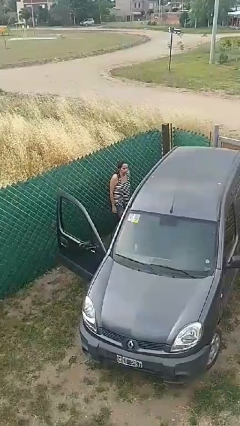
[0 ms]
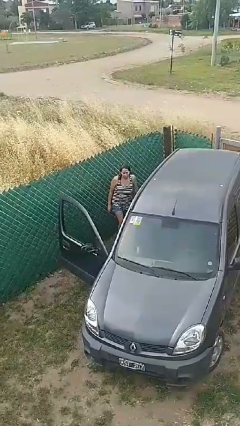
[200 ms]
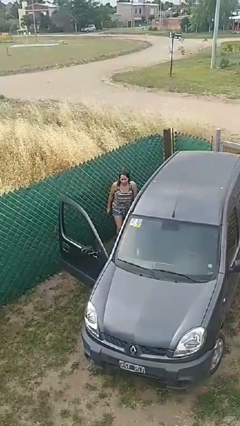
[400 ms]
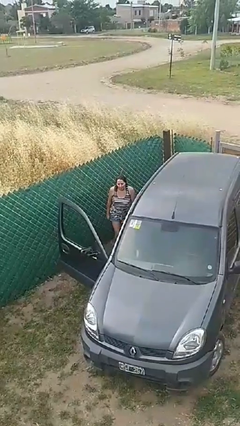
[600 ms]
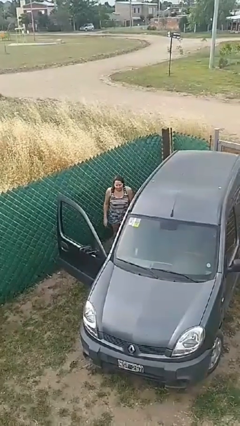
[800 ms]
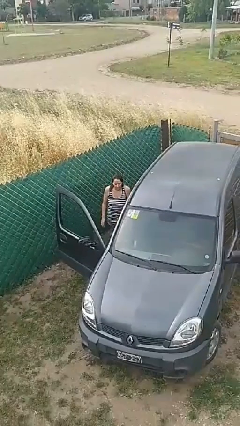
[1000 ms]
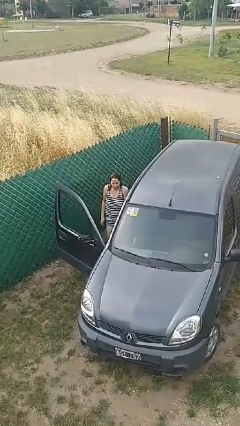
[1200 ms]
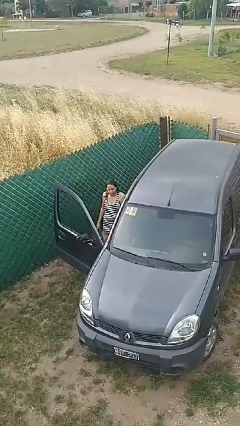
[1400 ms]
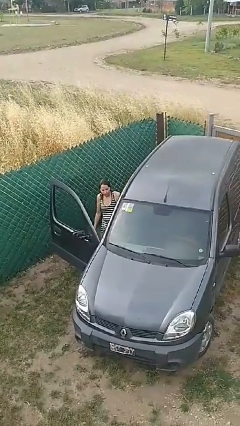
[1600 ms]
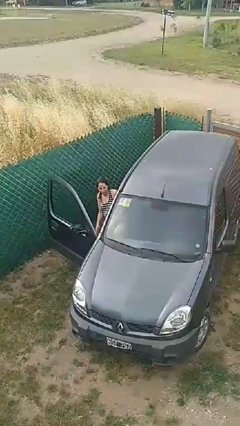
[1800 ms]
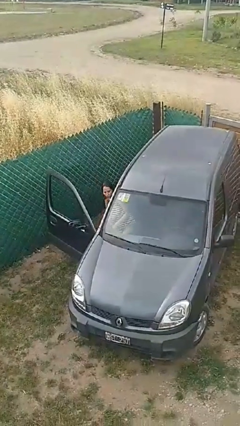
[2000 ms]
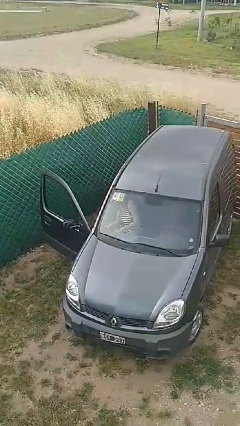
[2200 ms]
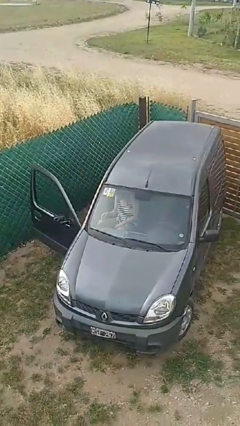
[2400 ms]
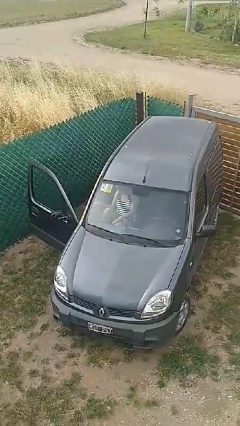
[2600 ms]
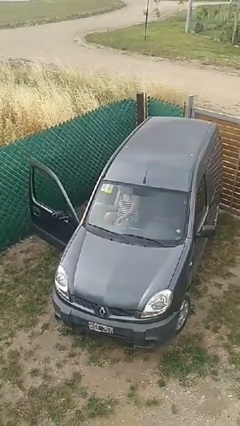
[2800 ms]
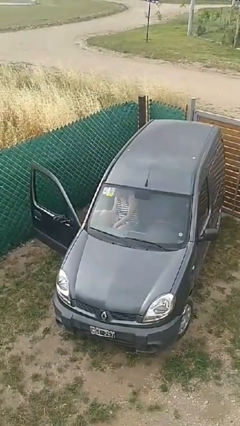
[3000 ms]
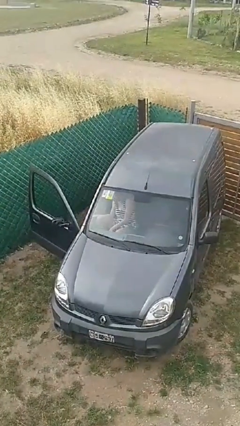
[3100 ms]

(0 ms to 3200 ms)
person enters car

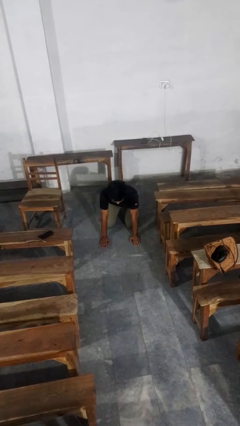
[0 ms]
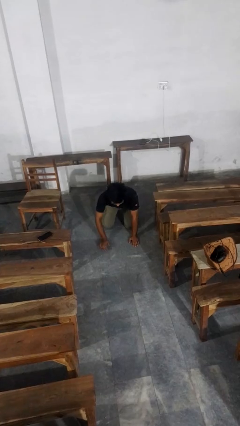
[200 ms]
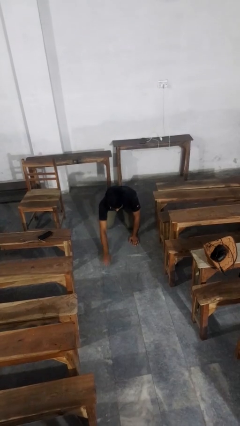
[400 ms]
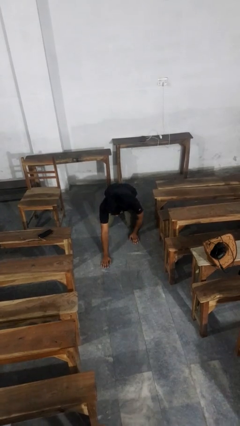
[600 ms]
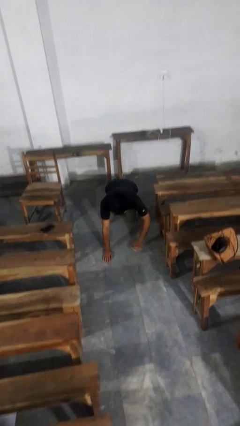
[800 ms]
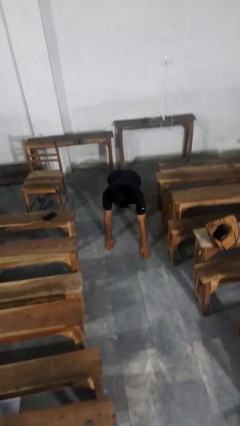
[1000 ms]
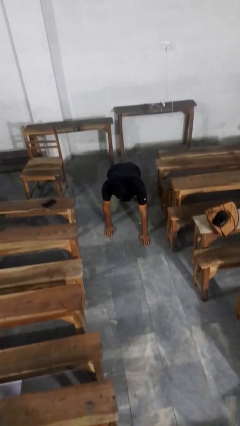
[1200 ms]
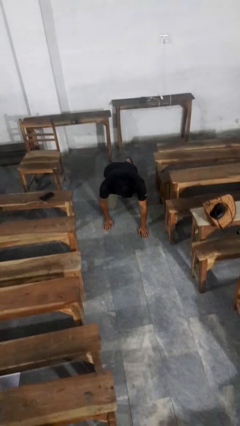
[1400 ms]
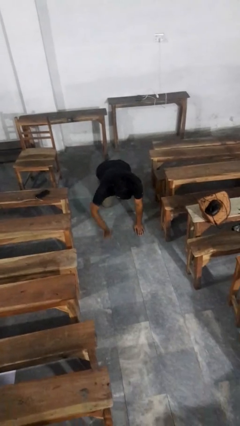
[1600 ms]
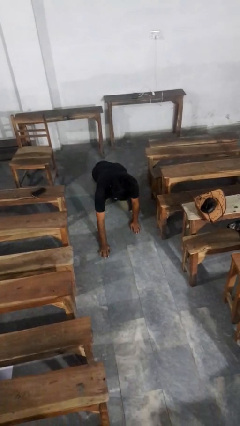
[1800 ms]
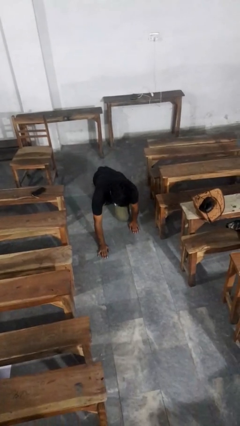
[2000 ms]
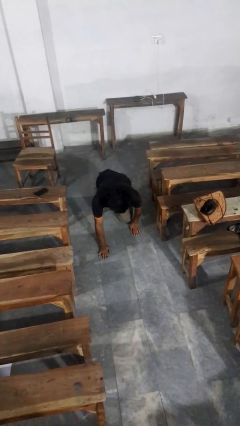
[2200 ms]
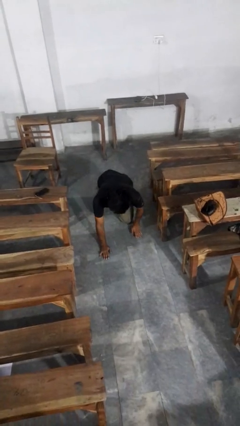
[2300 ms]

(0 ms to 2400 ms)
person crawls

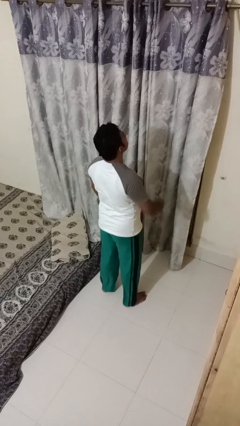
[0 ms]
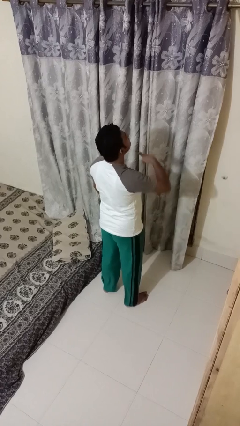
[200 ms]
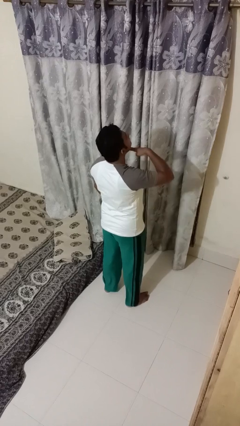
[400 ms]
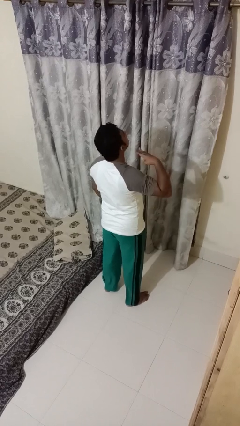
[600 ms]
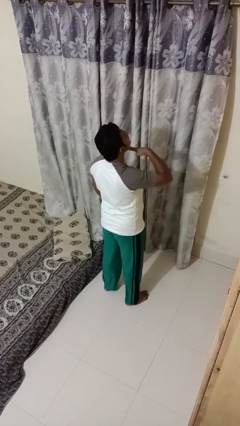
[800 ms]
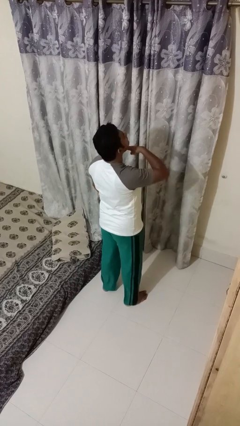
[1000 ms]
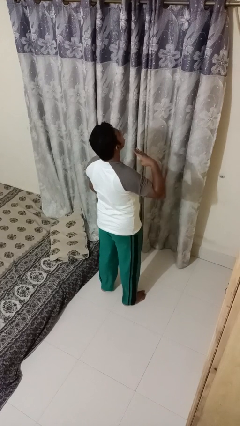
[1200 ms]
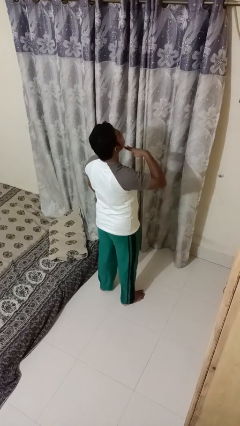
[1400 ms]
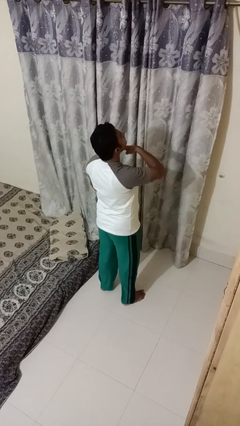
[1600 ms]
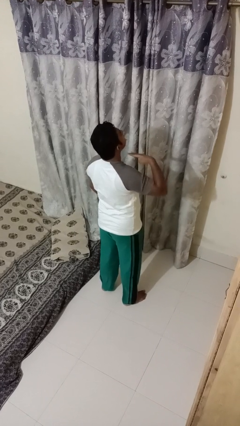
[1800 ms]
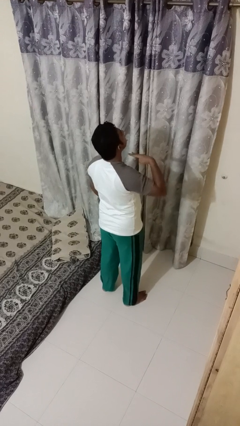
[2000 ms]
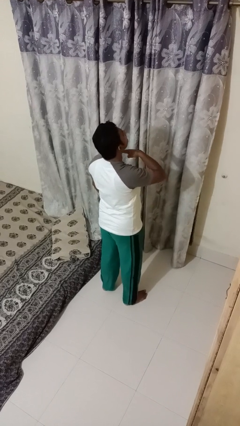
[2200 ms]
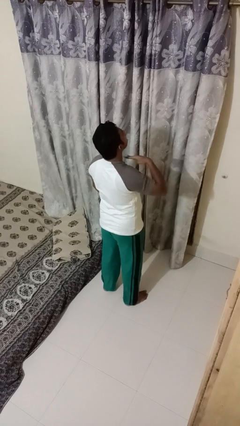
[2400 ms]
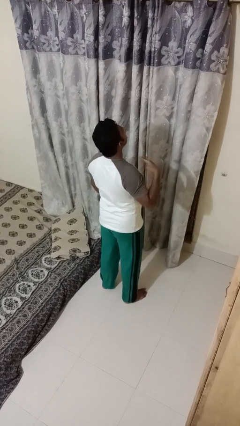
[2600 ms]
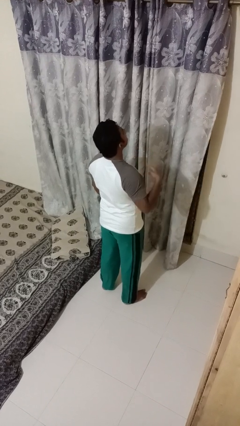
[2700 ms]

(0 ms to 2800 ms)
person gestures cut

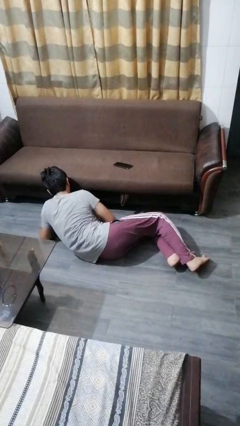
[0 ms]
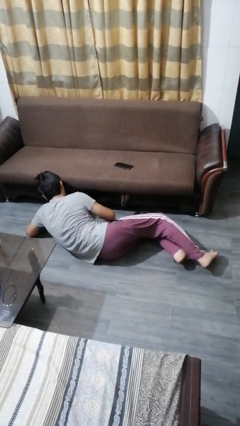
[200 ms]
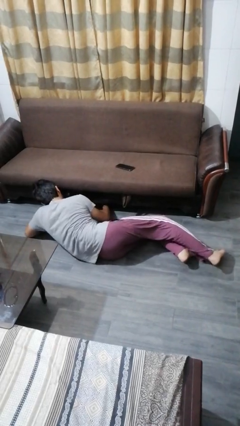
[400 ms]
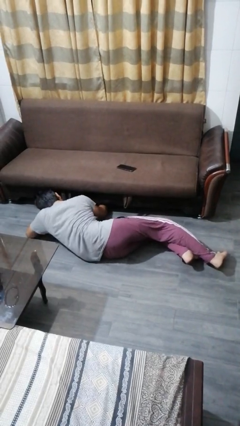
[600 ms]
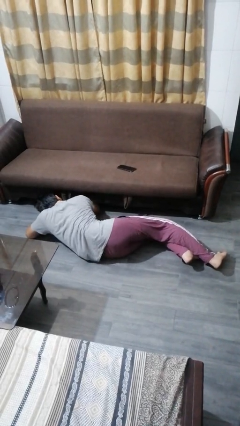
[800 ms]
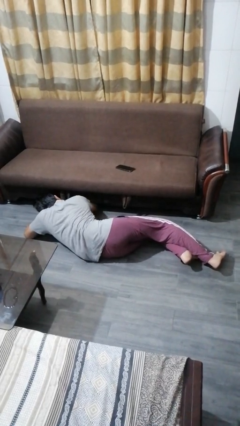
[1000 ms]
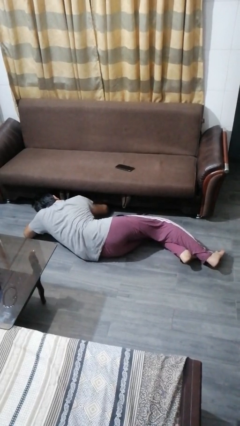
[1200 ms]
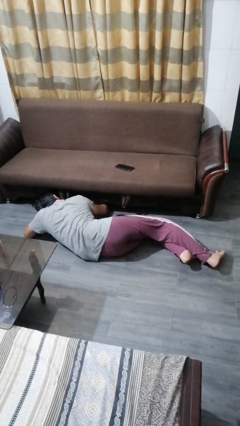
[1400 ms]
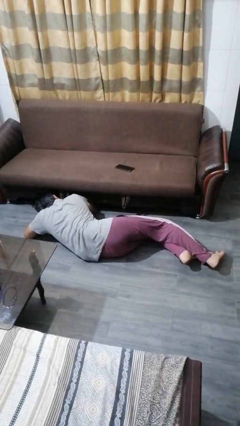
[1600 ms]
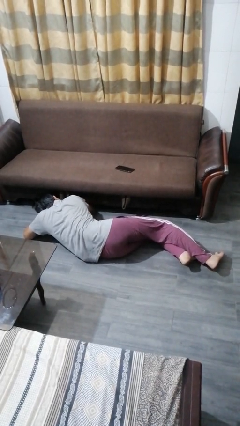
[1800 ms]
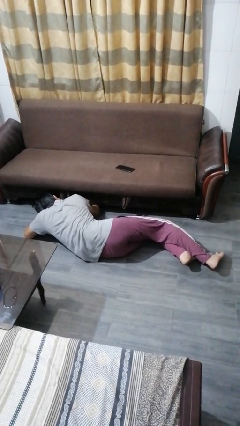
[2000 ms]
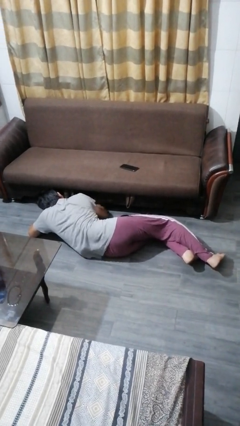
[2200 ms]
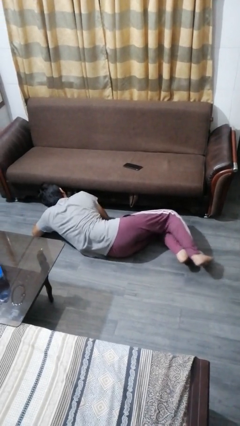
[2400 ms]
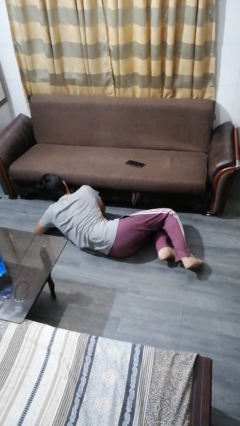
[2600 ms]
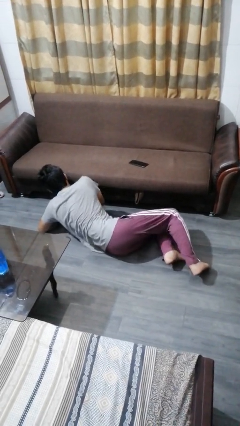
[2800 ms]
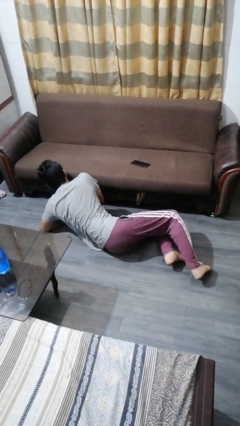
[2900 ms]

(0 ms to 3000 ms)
person searches under couch

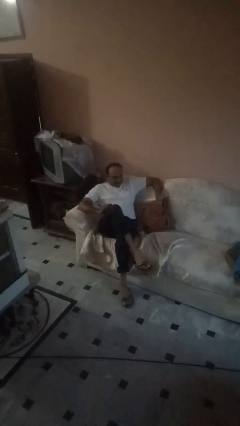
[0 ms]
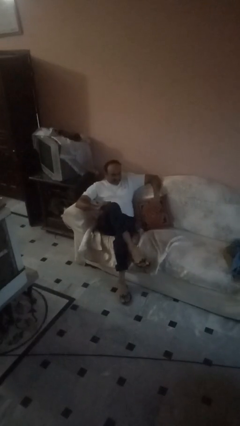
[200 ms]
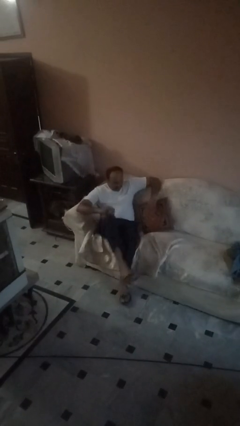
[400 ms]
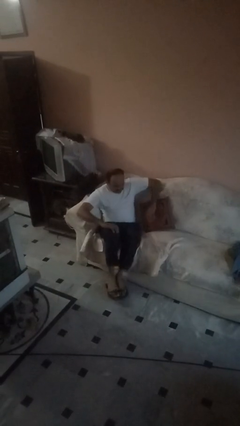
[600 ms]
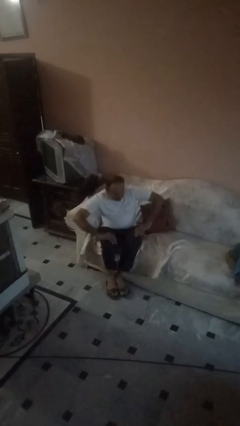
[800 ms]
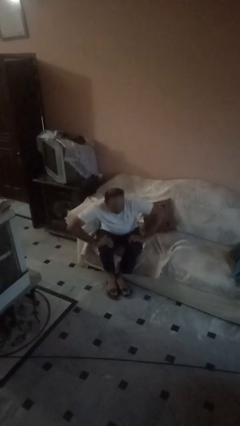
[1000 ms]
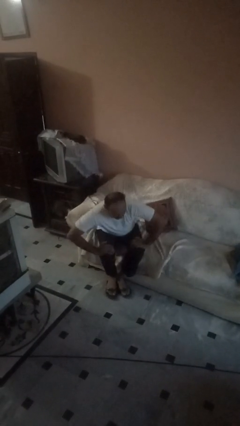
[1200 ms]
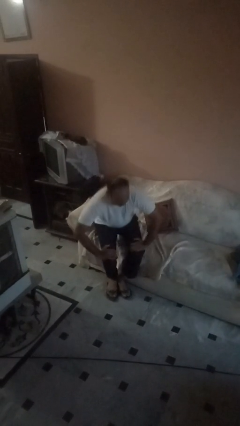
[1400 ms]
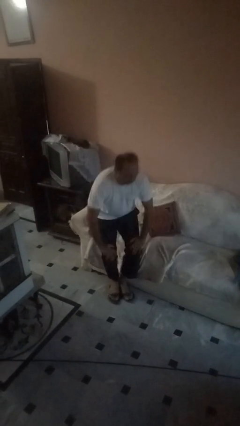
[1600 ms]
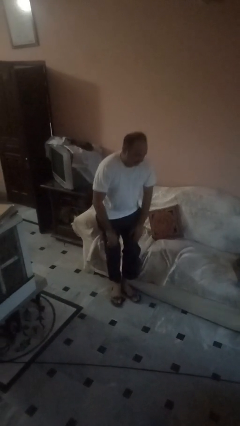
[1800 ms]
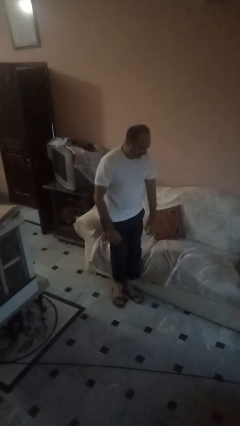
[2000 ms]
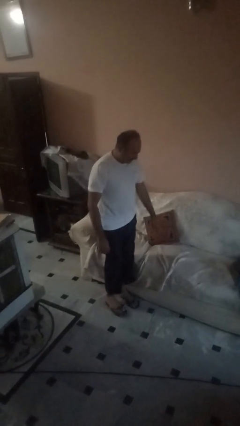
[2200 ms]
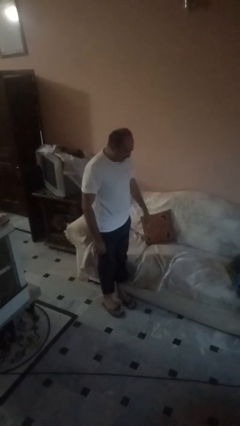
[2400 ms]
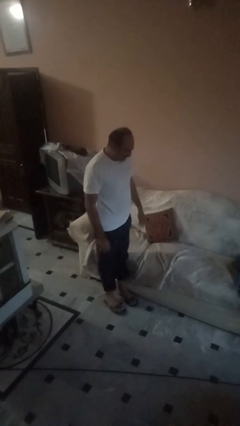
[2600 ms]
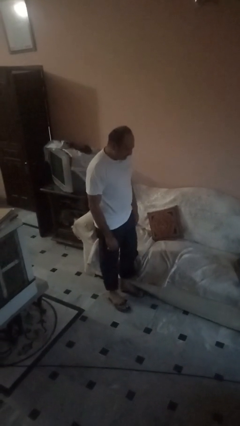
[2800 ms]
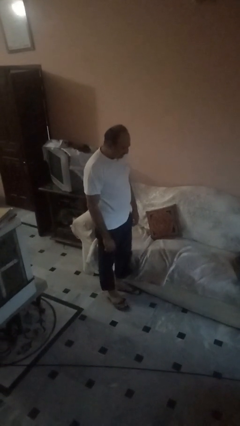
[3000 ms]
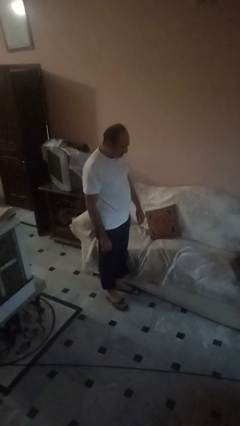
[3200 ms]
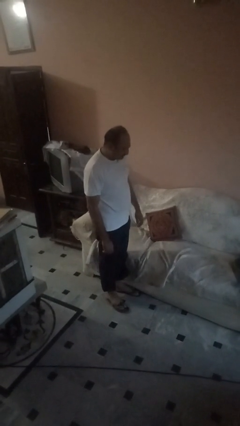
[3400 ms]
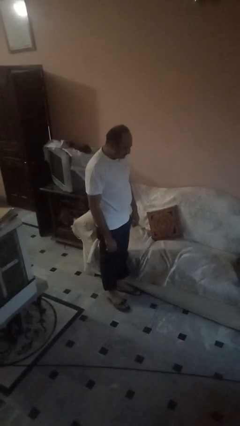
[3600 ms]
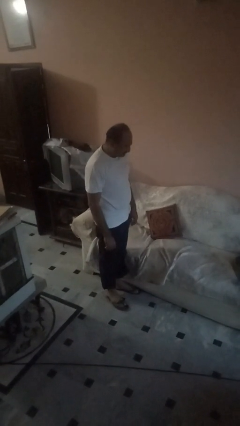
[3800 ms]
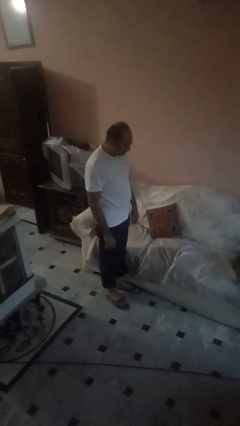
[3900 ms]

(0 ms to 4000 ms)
person stands up

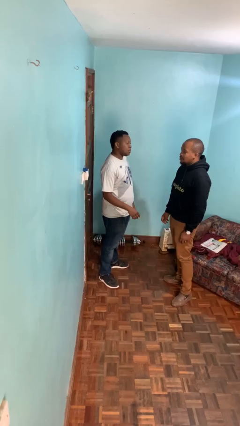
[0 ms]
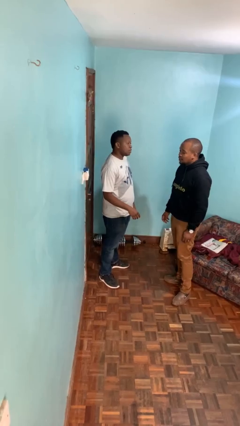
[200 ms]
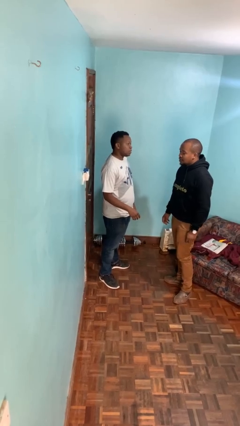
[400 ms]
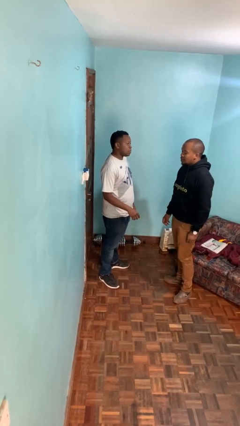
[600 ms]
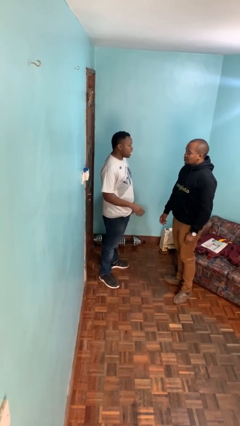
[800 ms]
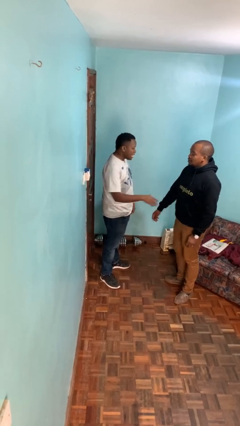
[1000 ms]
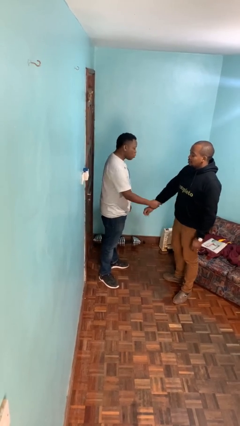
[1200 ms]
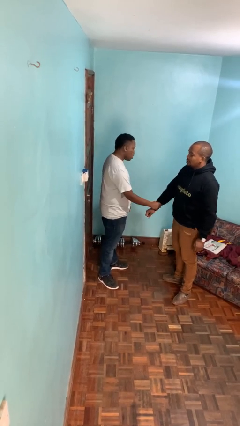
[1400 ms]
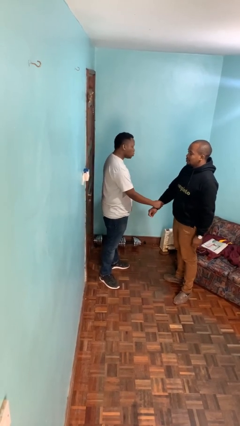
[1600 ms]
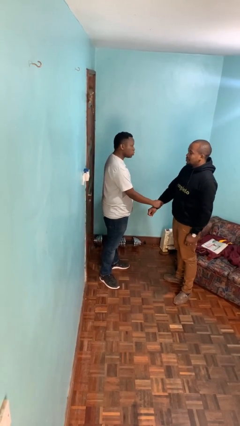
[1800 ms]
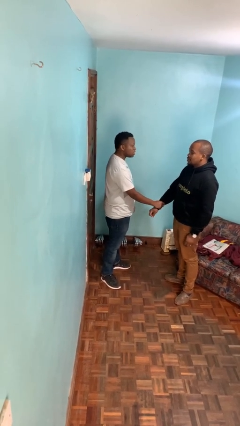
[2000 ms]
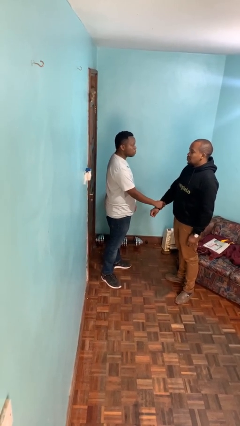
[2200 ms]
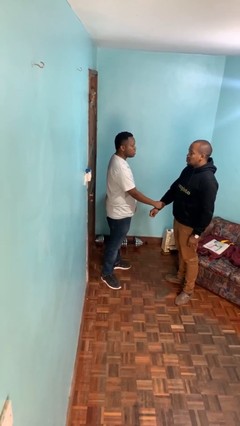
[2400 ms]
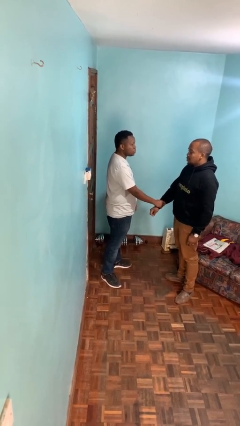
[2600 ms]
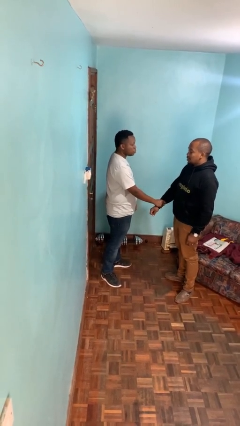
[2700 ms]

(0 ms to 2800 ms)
person grabs person by forearm
